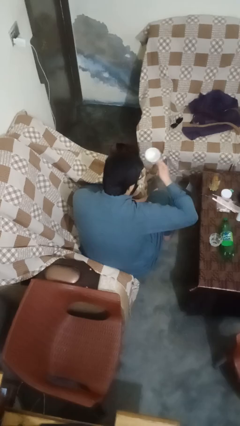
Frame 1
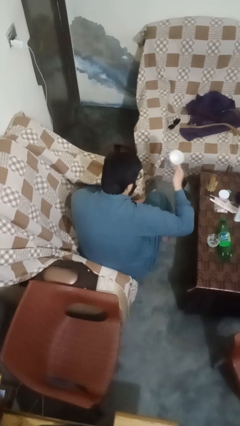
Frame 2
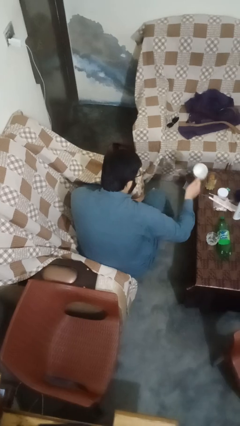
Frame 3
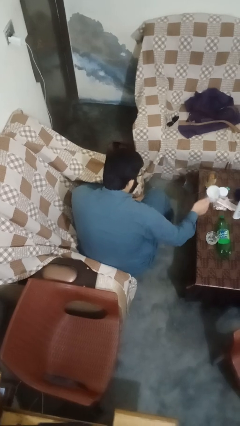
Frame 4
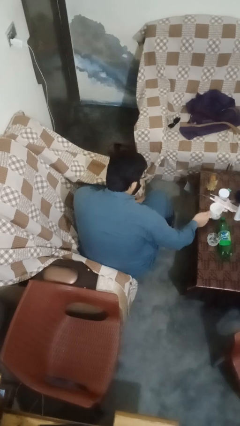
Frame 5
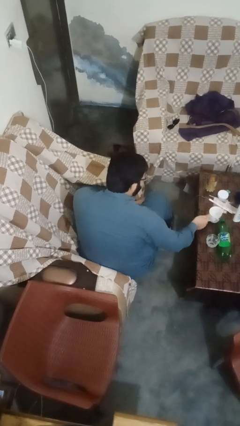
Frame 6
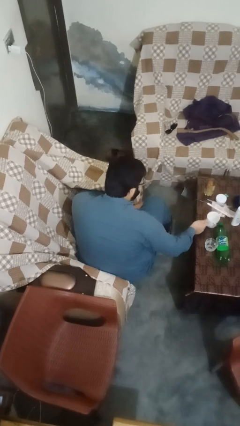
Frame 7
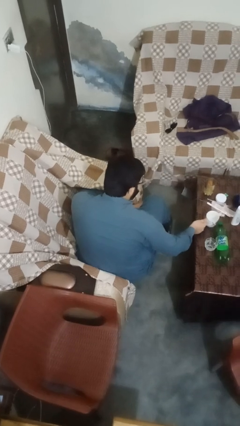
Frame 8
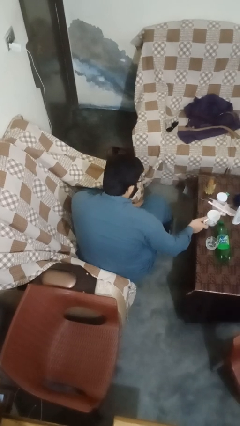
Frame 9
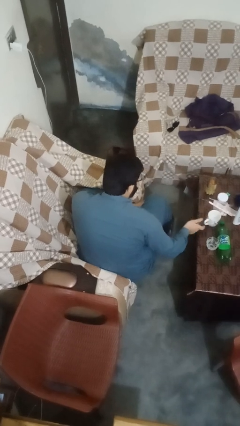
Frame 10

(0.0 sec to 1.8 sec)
person puts down object on table

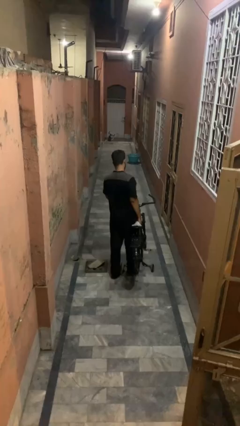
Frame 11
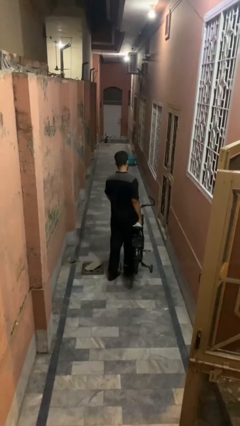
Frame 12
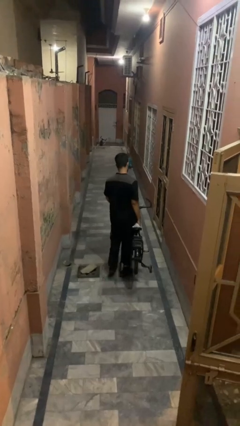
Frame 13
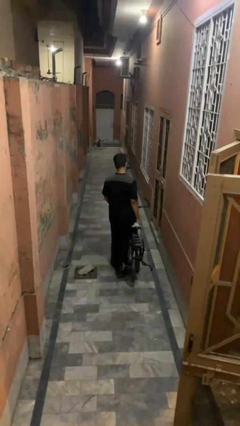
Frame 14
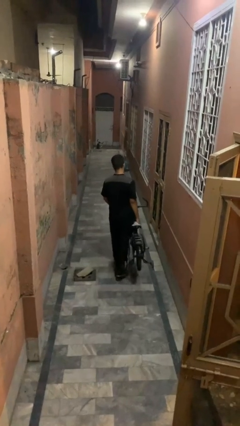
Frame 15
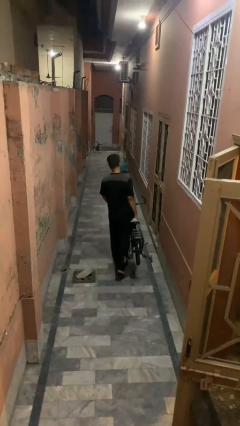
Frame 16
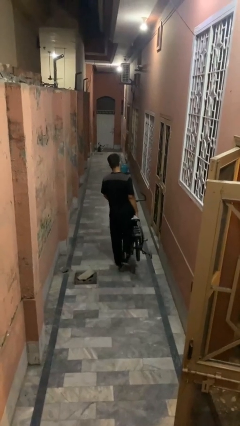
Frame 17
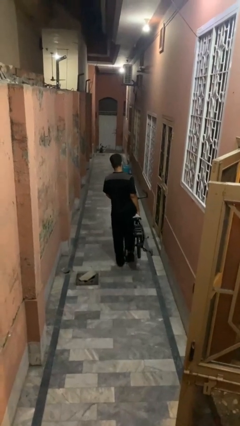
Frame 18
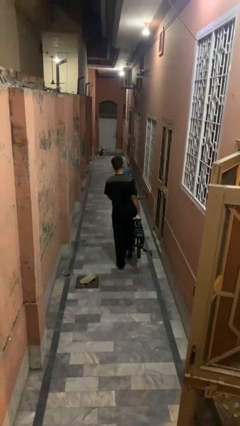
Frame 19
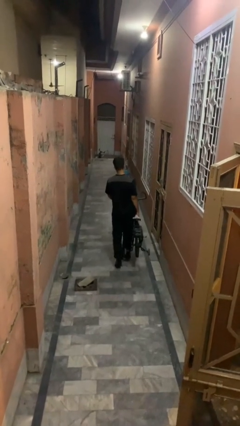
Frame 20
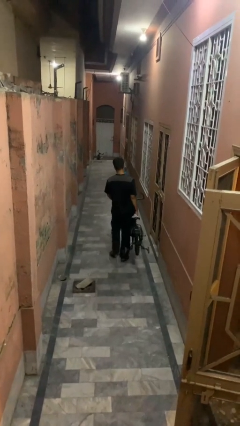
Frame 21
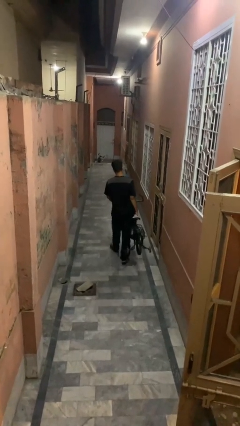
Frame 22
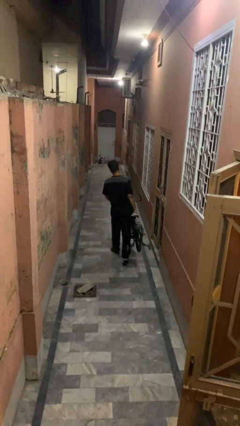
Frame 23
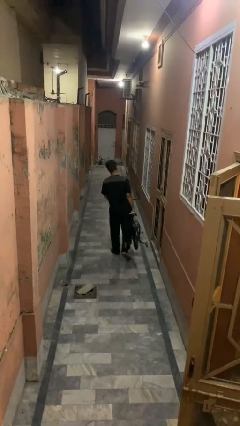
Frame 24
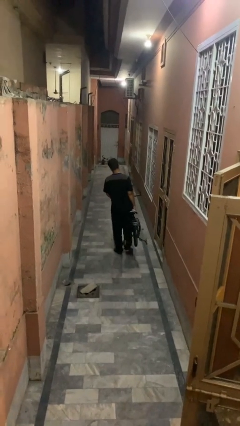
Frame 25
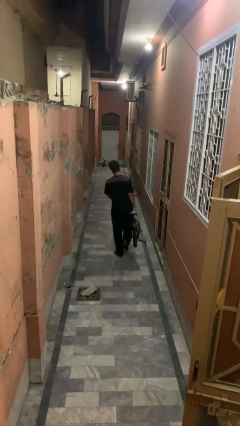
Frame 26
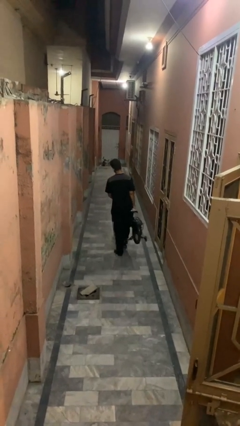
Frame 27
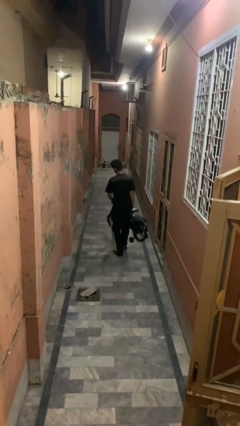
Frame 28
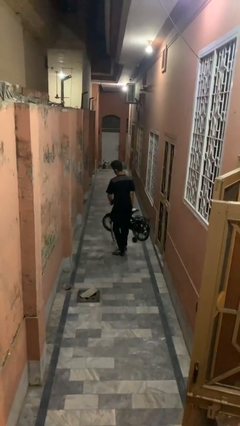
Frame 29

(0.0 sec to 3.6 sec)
person carries bicycle

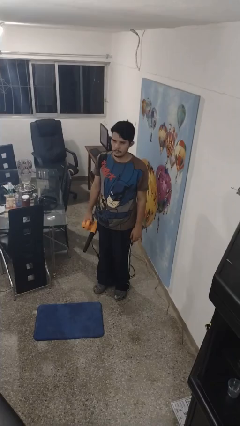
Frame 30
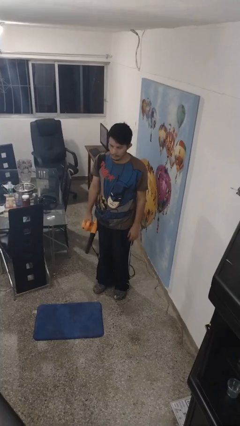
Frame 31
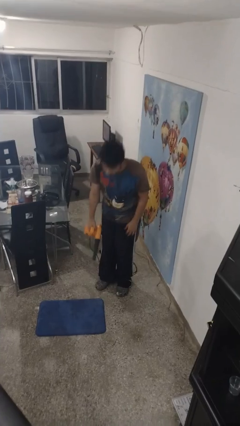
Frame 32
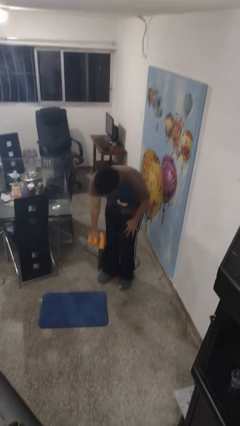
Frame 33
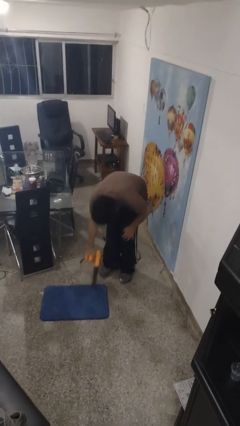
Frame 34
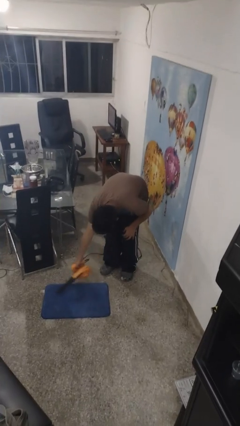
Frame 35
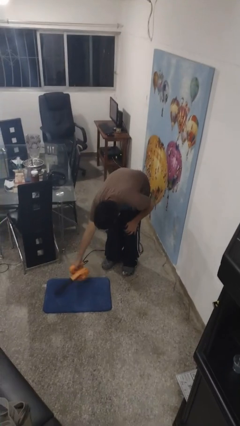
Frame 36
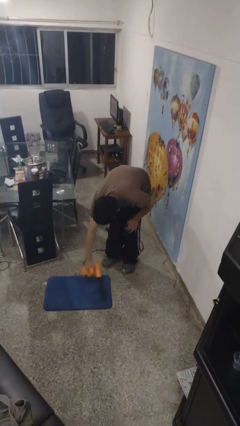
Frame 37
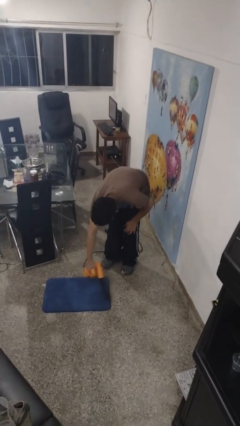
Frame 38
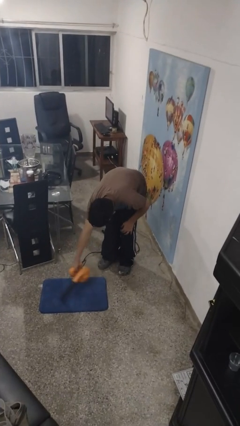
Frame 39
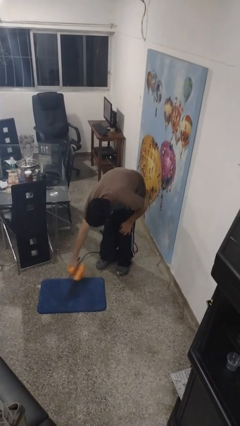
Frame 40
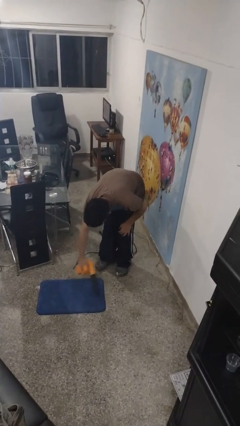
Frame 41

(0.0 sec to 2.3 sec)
person vacuums carpet

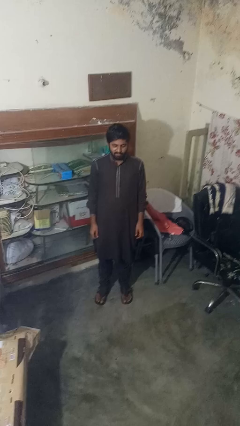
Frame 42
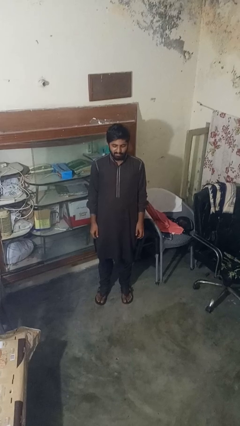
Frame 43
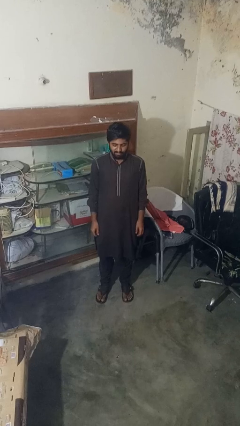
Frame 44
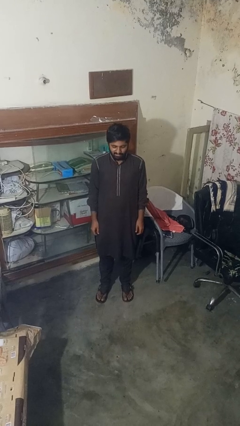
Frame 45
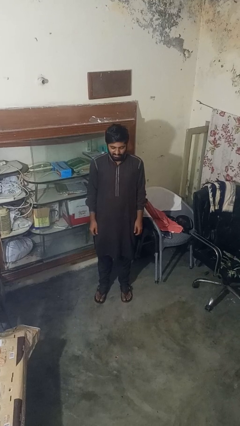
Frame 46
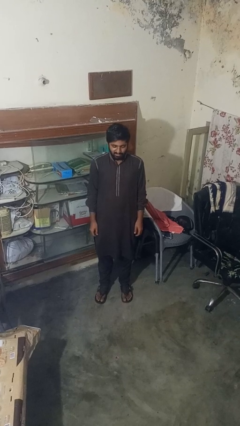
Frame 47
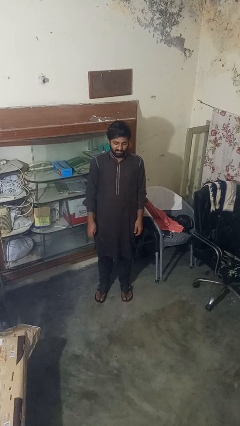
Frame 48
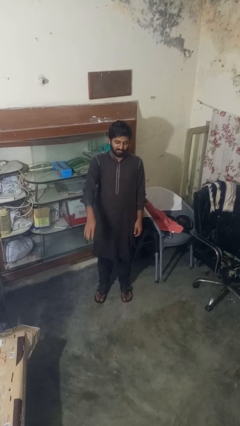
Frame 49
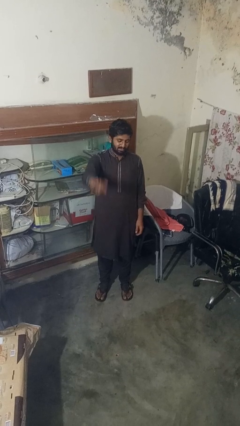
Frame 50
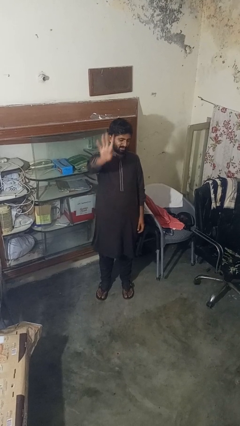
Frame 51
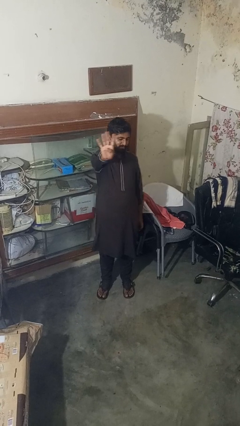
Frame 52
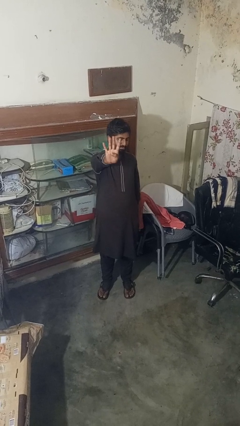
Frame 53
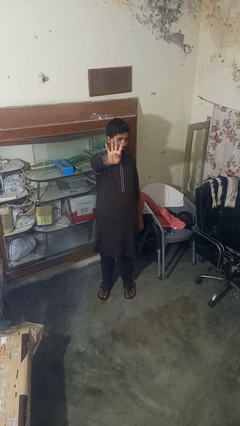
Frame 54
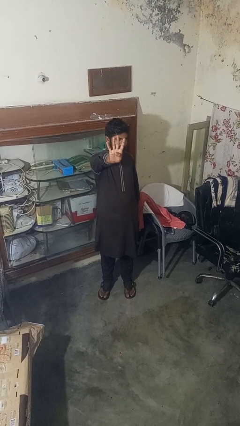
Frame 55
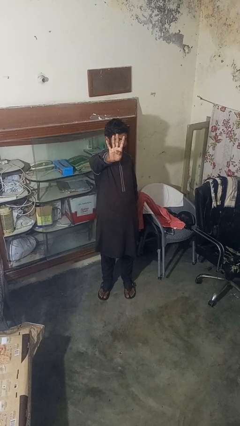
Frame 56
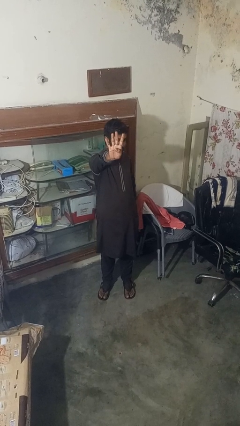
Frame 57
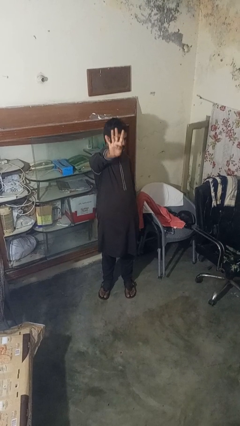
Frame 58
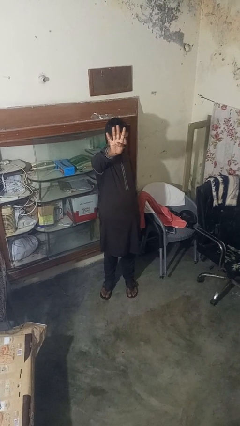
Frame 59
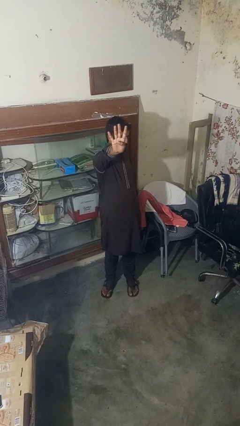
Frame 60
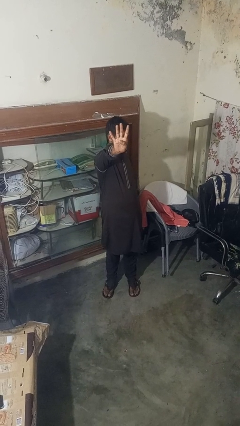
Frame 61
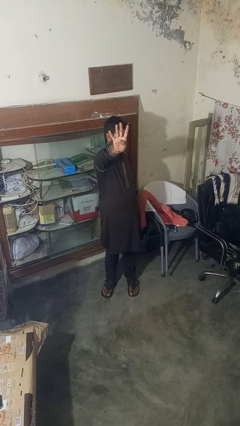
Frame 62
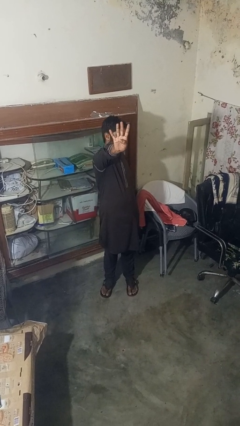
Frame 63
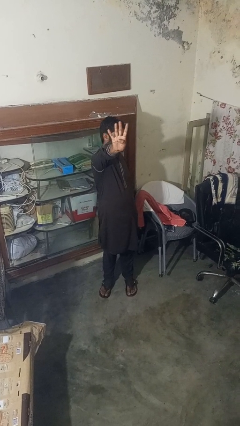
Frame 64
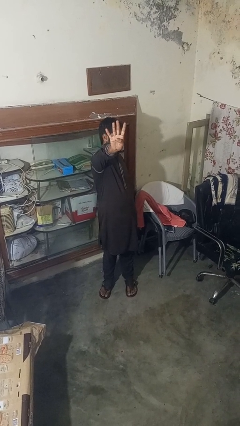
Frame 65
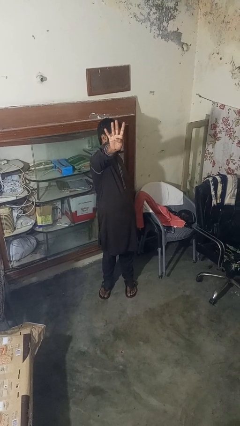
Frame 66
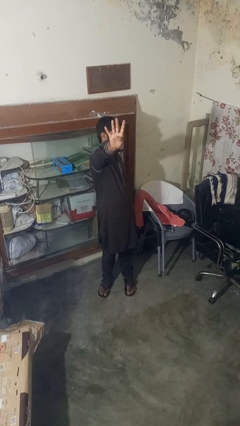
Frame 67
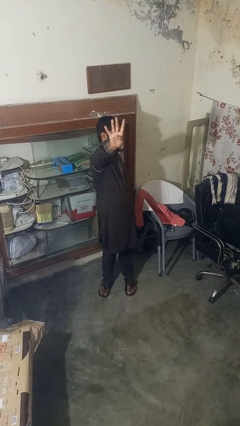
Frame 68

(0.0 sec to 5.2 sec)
person gestures number four

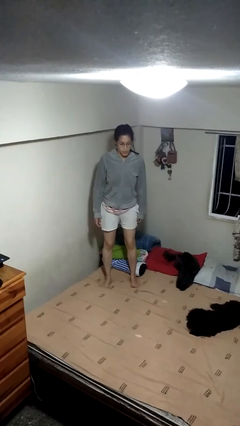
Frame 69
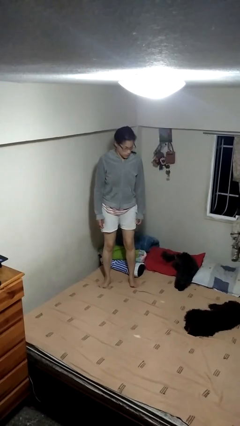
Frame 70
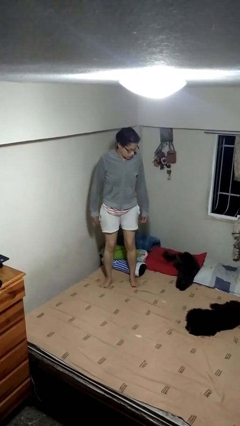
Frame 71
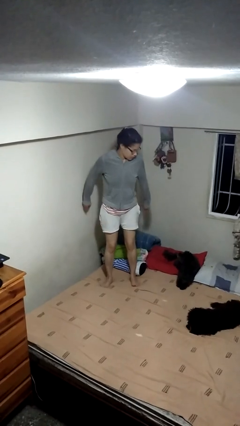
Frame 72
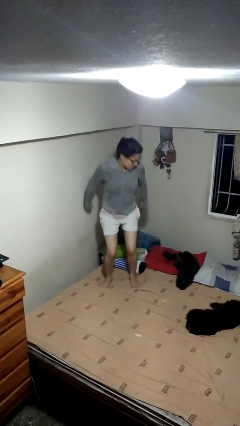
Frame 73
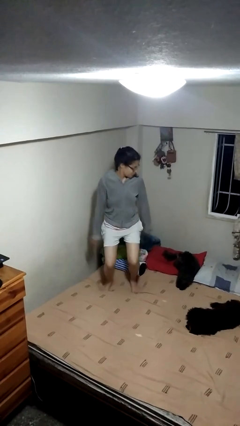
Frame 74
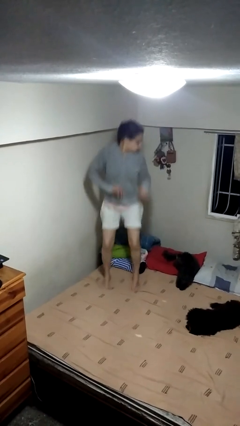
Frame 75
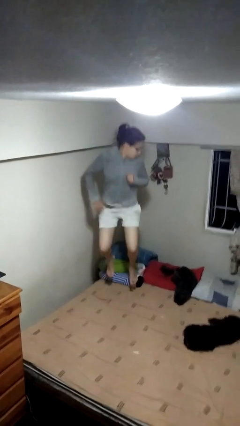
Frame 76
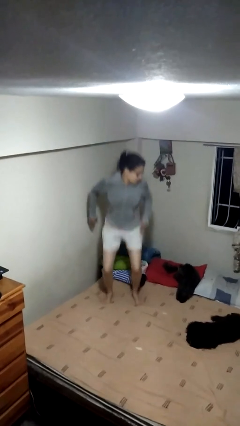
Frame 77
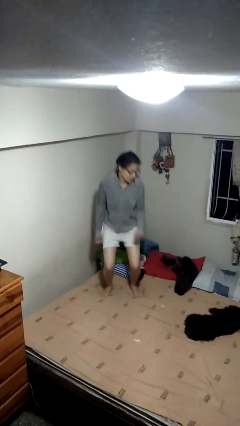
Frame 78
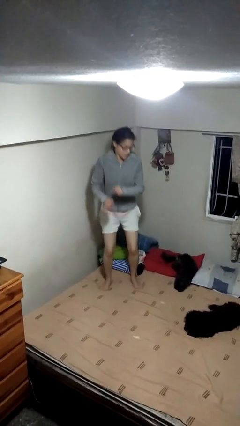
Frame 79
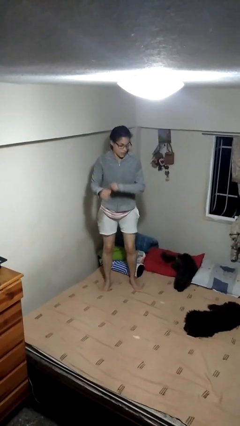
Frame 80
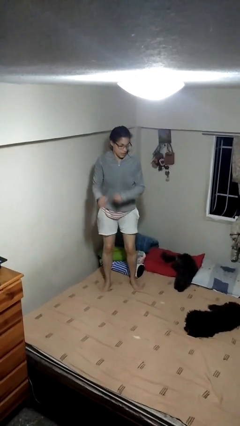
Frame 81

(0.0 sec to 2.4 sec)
person jumps on bed

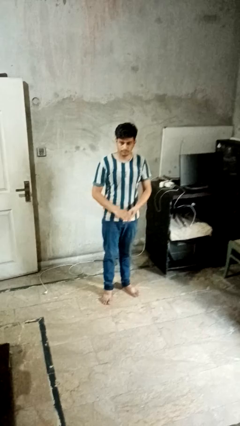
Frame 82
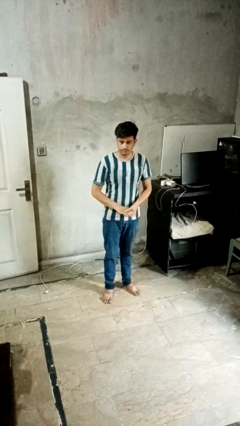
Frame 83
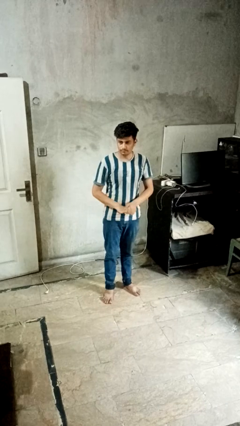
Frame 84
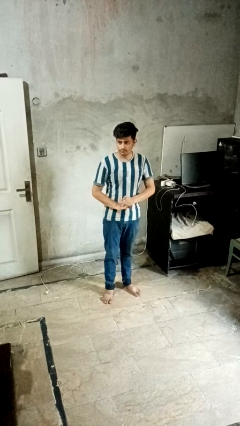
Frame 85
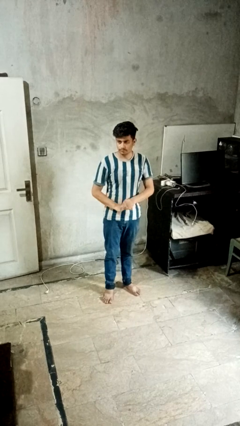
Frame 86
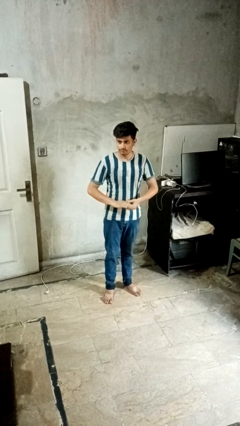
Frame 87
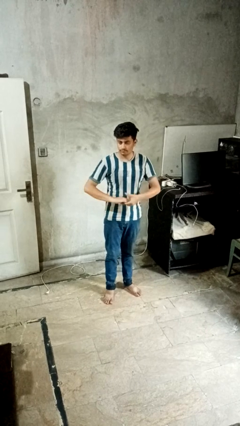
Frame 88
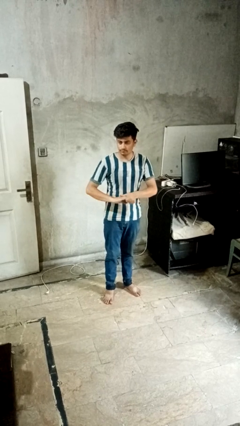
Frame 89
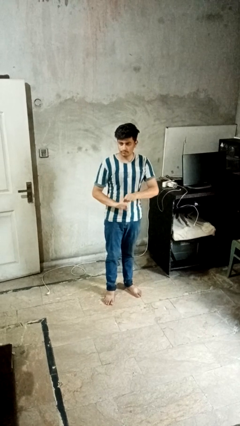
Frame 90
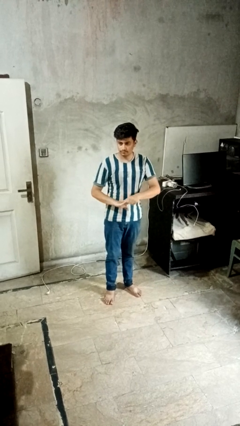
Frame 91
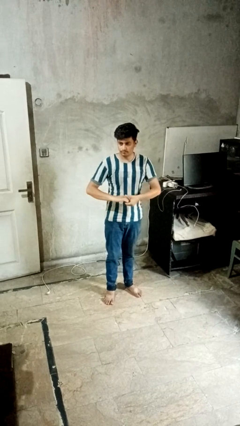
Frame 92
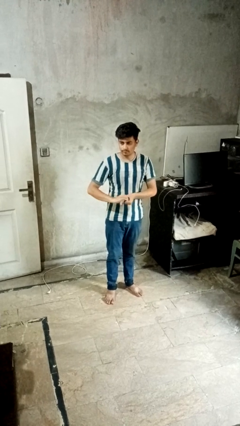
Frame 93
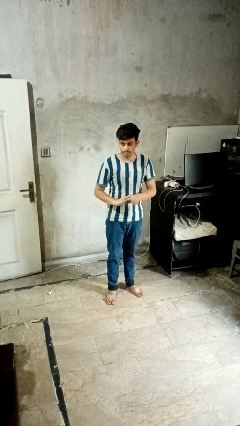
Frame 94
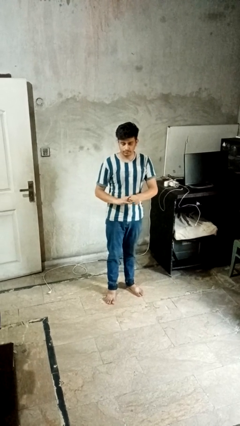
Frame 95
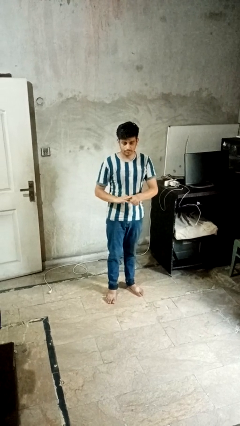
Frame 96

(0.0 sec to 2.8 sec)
person cracks knuckles
